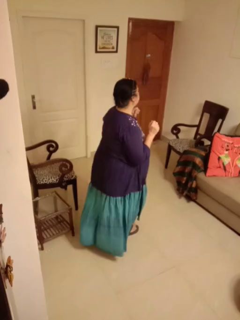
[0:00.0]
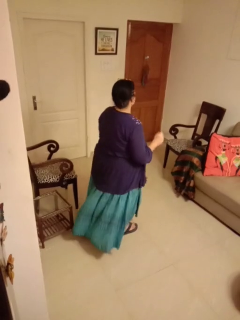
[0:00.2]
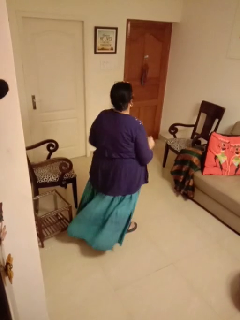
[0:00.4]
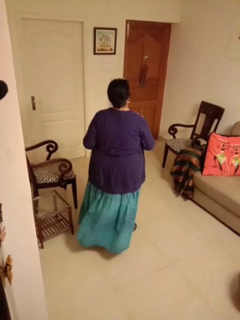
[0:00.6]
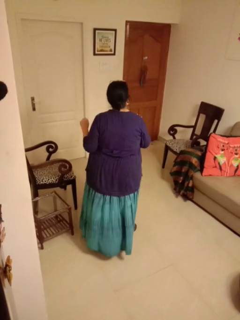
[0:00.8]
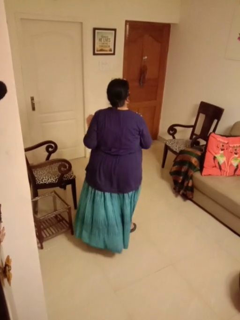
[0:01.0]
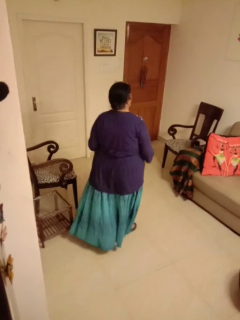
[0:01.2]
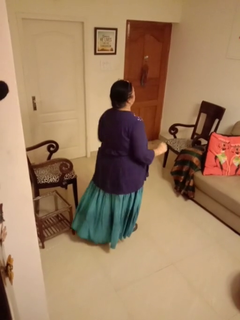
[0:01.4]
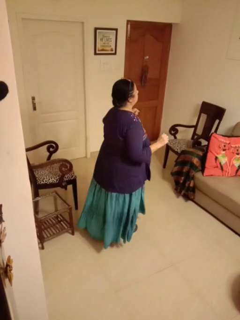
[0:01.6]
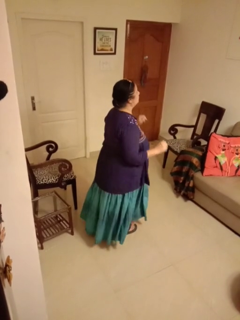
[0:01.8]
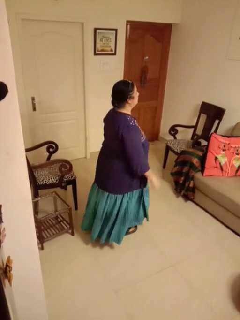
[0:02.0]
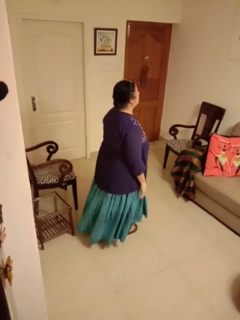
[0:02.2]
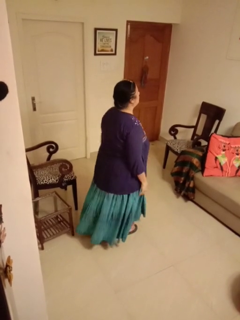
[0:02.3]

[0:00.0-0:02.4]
person dances in place

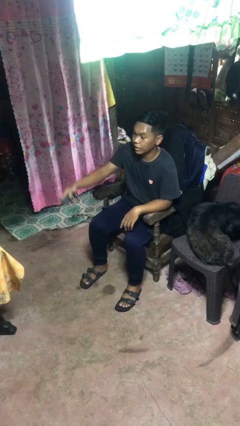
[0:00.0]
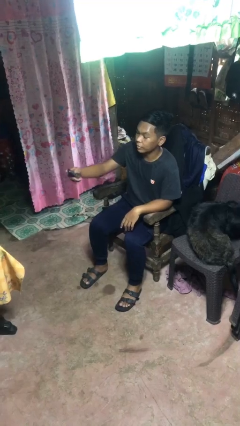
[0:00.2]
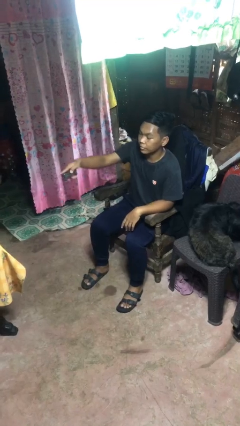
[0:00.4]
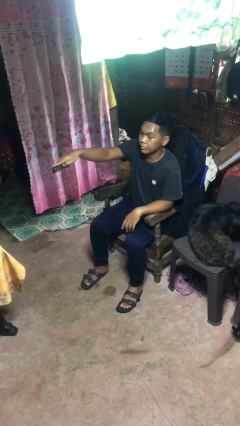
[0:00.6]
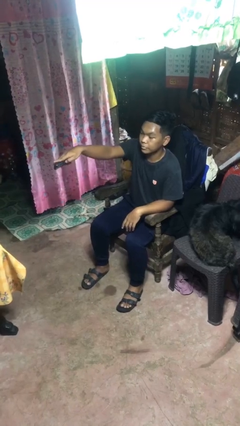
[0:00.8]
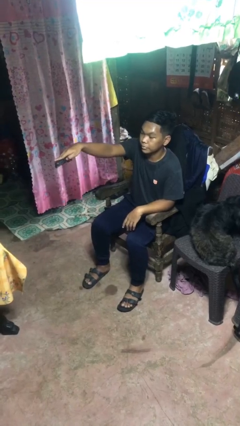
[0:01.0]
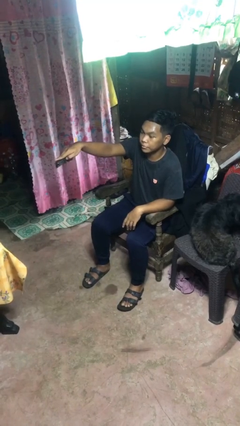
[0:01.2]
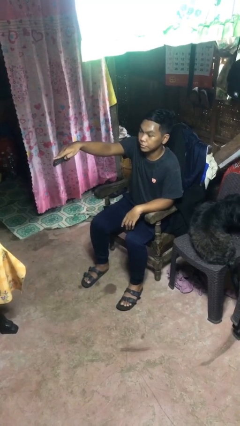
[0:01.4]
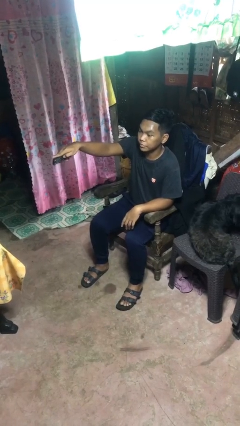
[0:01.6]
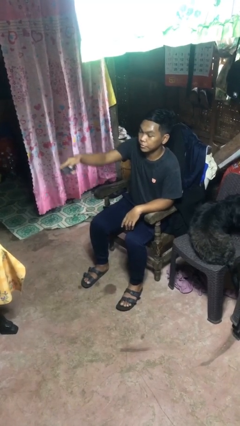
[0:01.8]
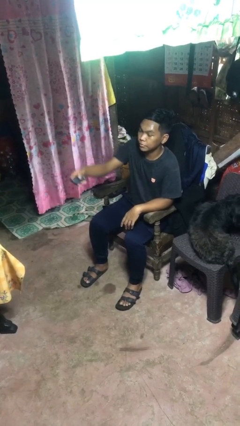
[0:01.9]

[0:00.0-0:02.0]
person uses television remote

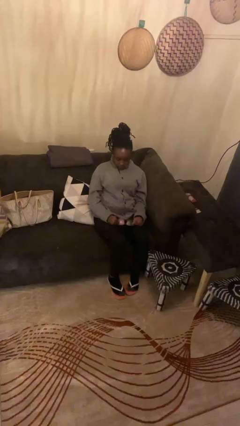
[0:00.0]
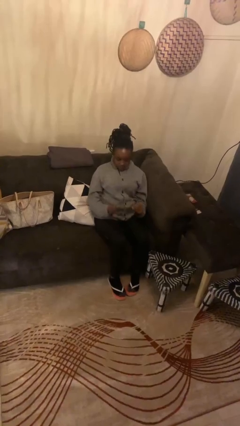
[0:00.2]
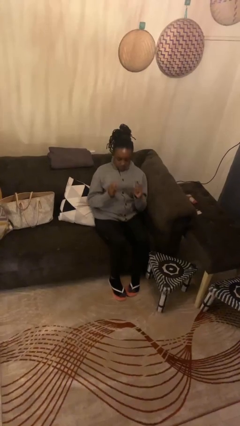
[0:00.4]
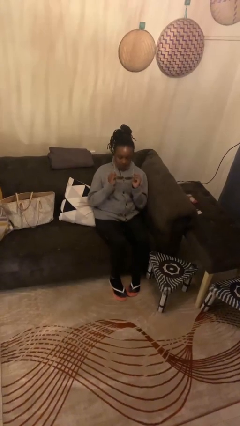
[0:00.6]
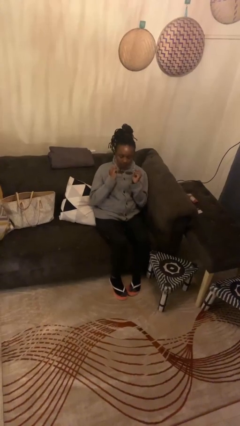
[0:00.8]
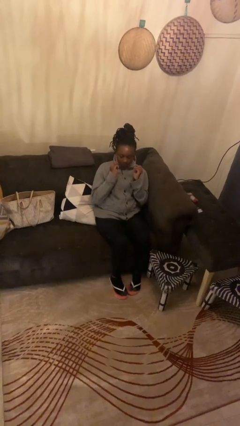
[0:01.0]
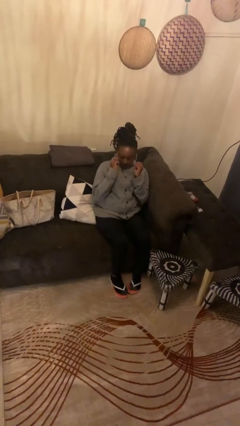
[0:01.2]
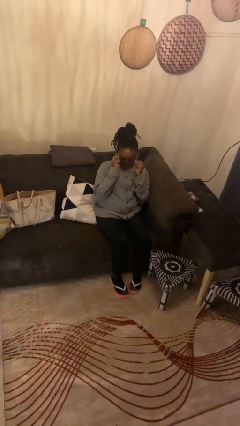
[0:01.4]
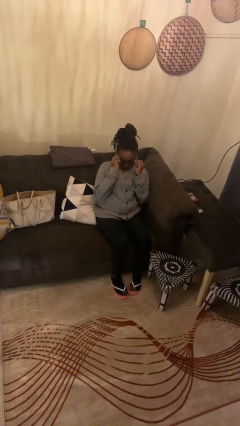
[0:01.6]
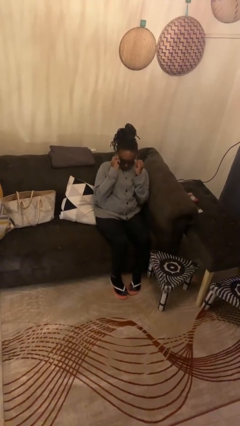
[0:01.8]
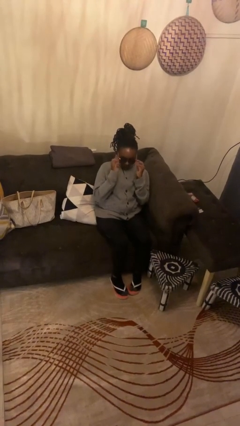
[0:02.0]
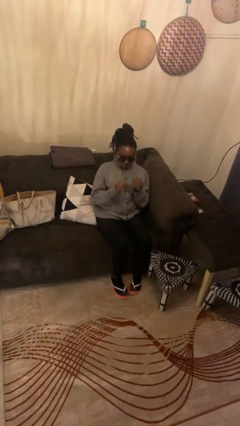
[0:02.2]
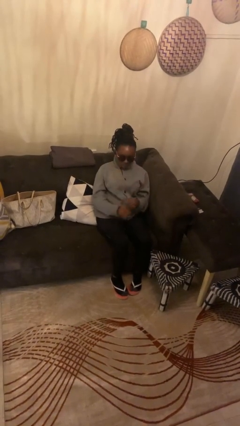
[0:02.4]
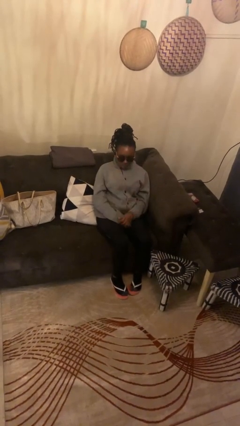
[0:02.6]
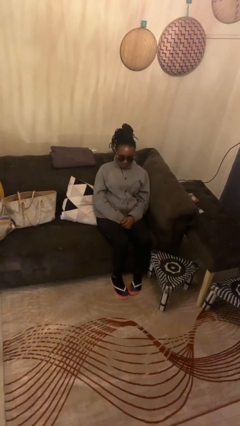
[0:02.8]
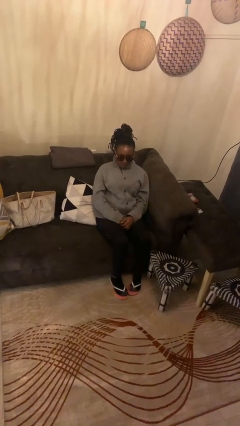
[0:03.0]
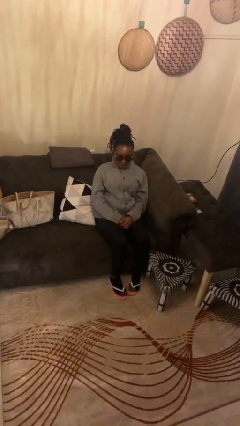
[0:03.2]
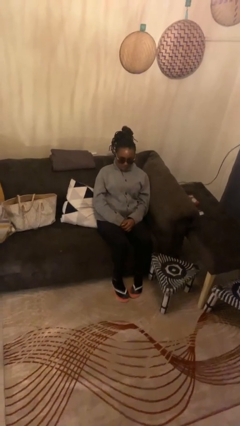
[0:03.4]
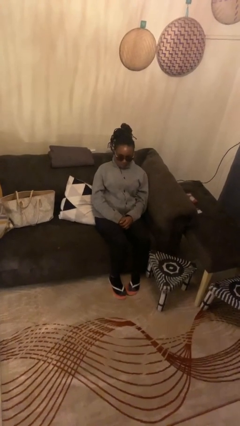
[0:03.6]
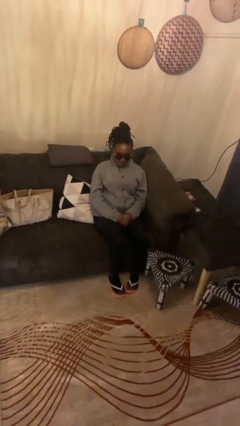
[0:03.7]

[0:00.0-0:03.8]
person puts on sunglasses

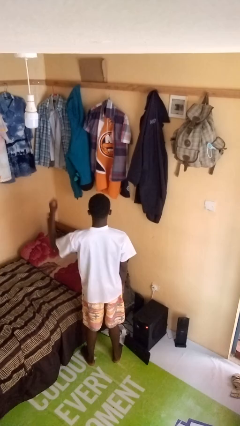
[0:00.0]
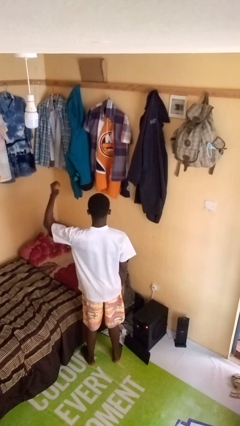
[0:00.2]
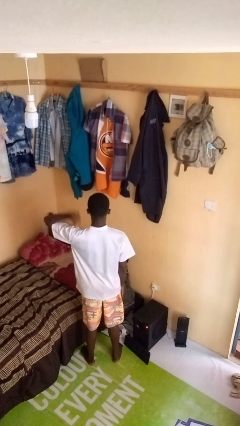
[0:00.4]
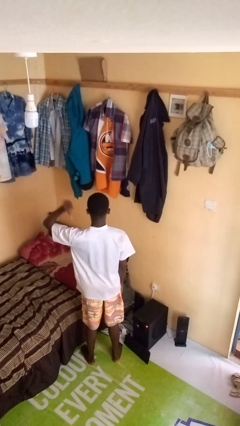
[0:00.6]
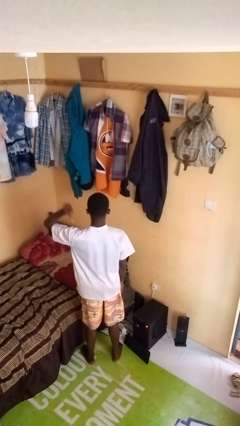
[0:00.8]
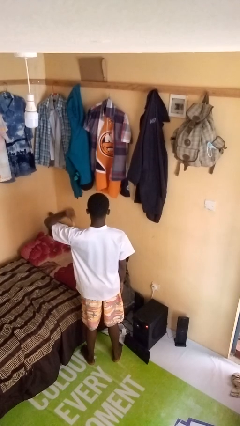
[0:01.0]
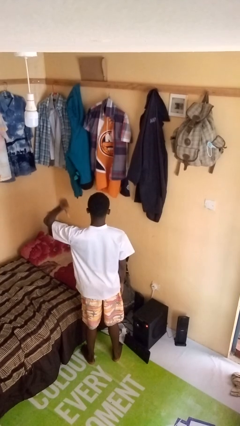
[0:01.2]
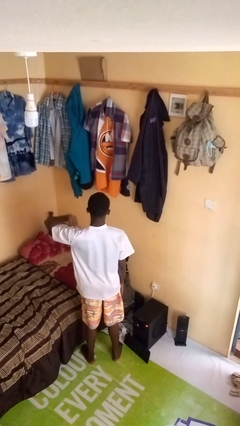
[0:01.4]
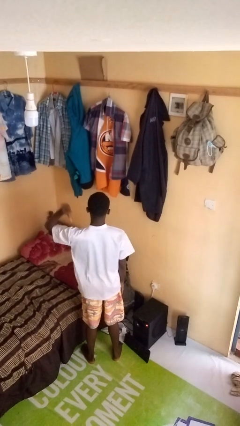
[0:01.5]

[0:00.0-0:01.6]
person gestures behind me

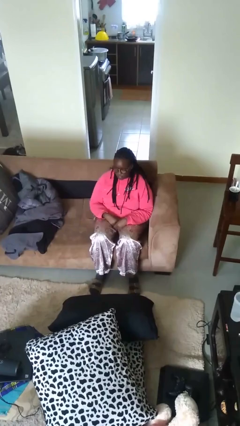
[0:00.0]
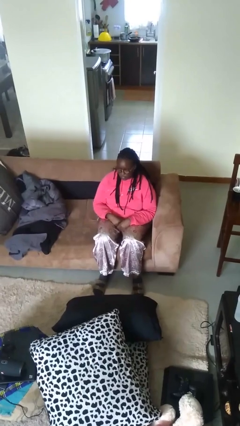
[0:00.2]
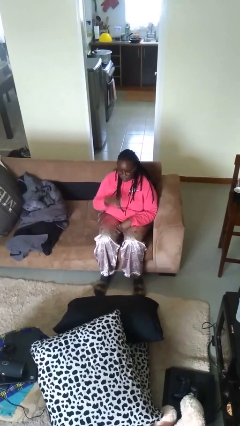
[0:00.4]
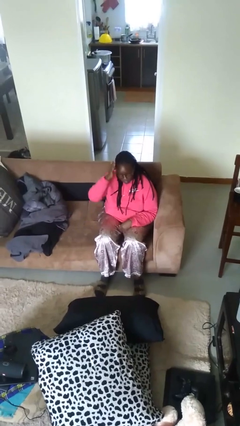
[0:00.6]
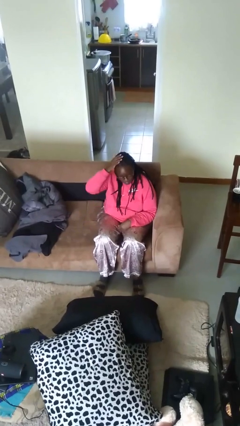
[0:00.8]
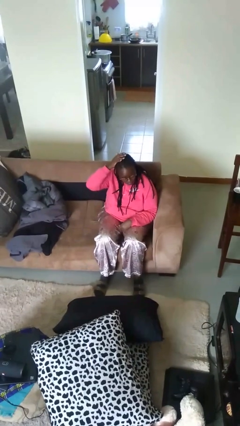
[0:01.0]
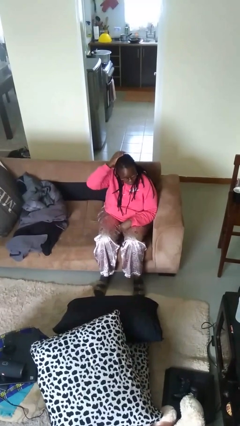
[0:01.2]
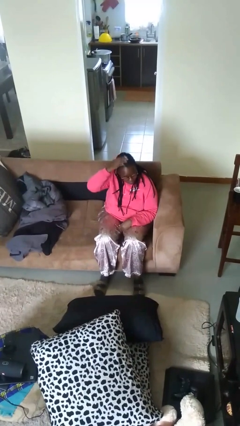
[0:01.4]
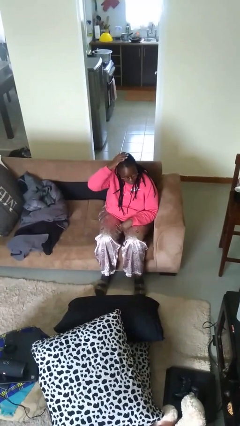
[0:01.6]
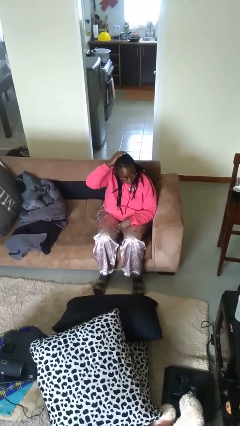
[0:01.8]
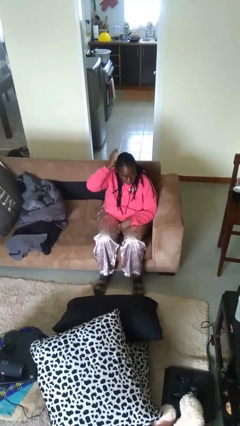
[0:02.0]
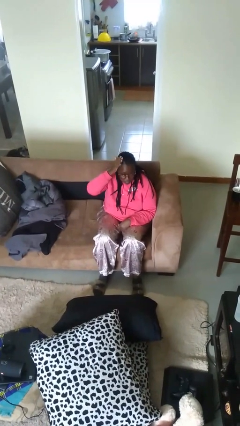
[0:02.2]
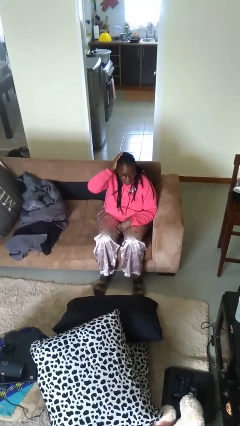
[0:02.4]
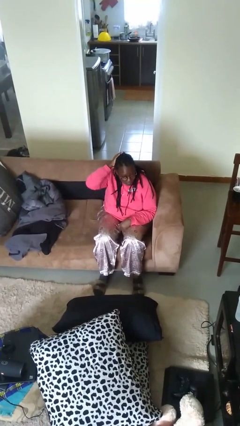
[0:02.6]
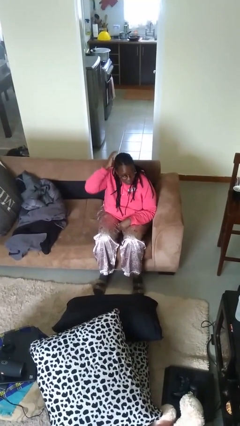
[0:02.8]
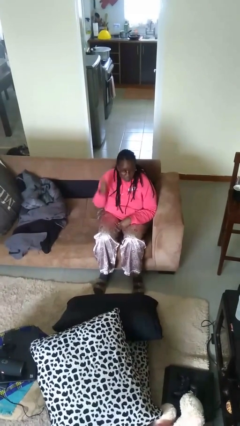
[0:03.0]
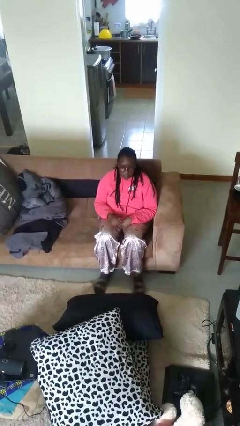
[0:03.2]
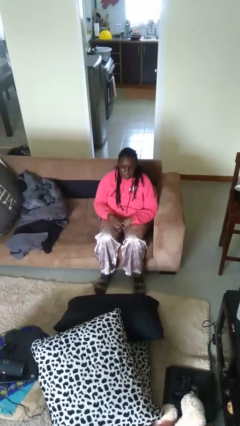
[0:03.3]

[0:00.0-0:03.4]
person strokes hair

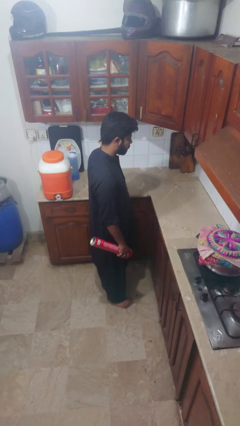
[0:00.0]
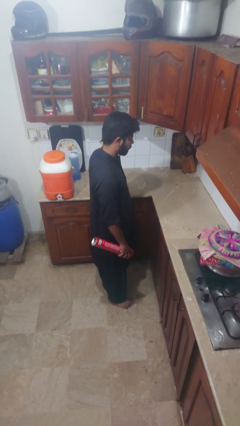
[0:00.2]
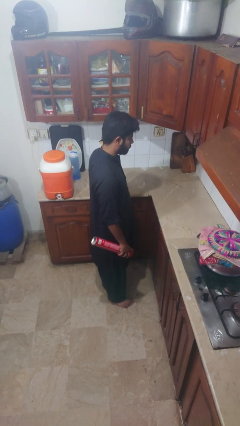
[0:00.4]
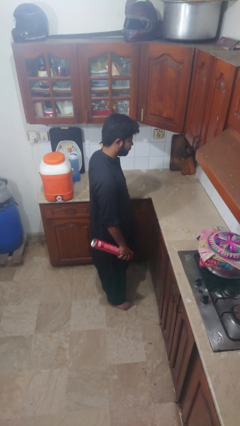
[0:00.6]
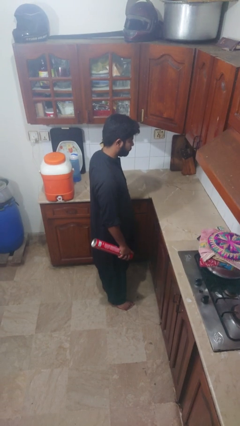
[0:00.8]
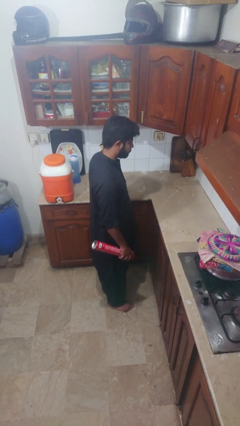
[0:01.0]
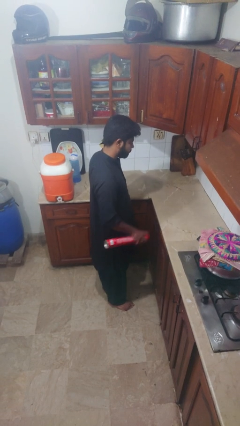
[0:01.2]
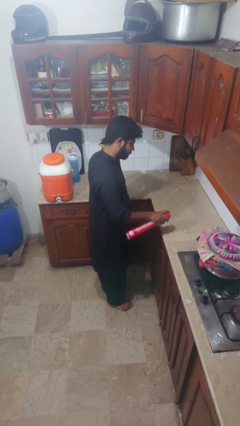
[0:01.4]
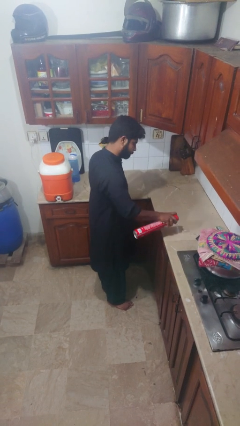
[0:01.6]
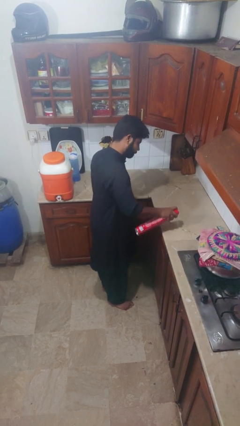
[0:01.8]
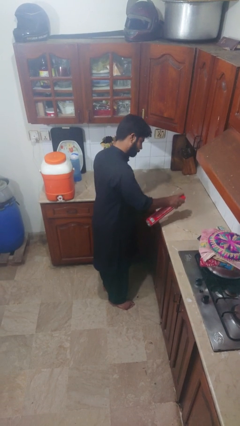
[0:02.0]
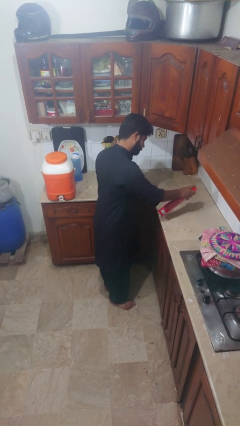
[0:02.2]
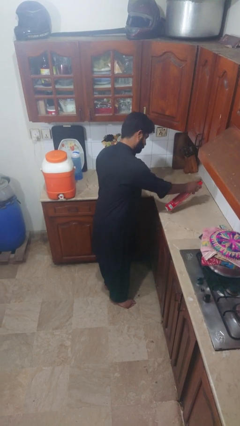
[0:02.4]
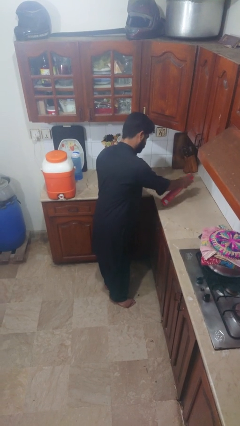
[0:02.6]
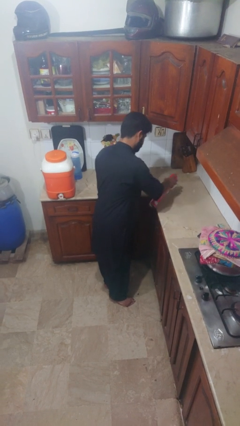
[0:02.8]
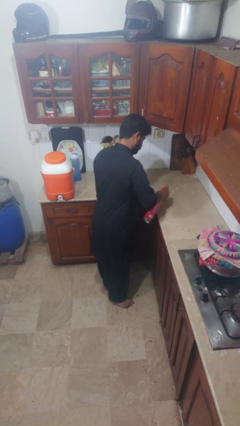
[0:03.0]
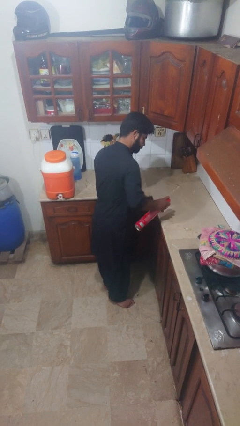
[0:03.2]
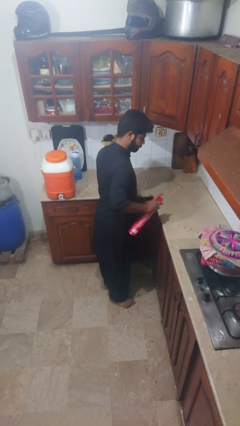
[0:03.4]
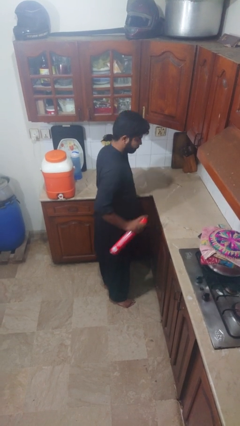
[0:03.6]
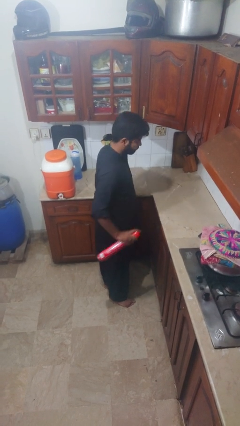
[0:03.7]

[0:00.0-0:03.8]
person sprays from bottle

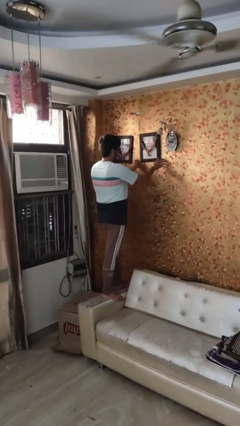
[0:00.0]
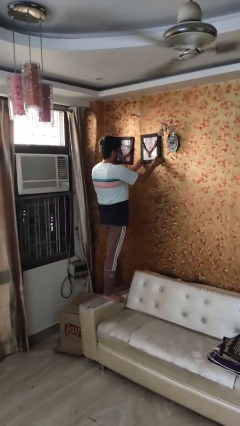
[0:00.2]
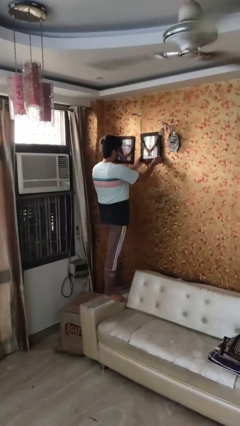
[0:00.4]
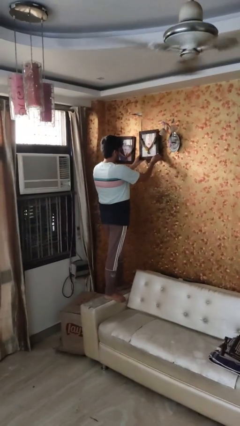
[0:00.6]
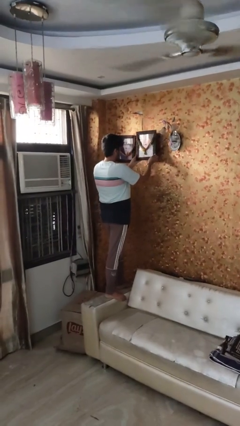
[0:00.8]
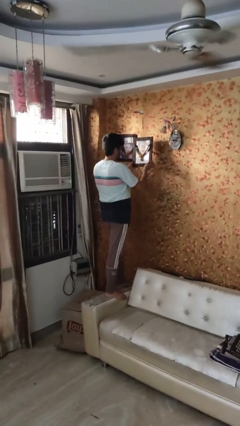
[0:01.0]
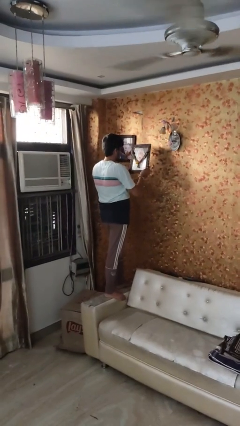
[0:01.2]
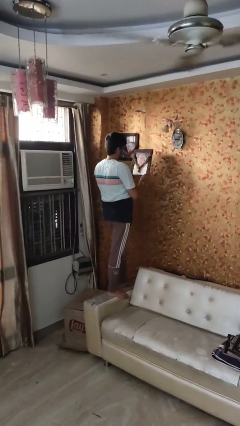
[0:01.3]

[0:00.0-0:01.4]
person takes down picture frame
